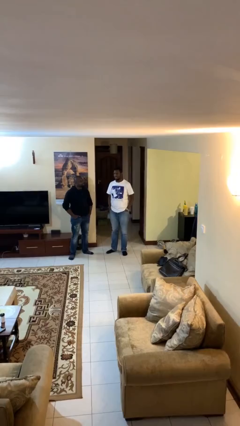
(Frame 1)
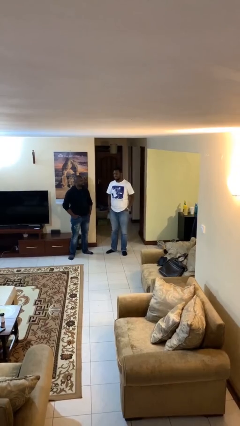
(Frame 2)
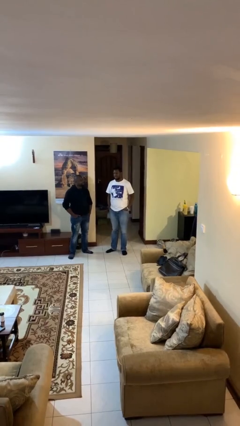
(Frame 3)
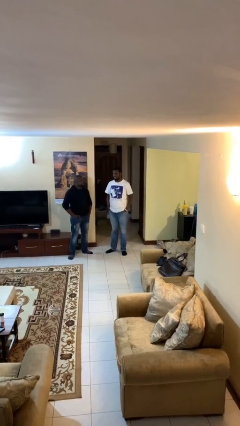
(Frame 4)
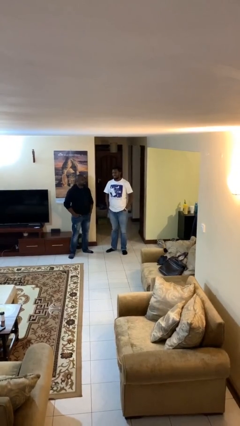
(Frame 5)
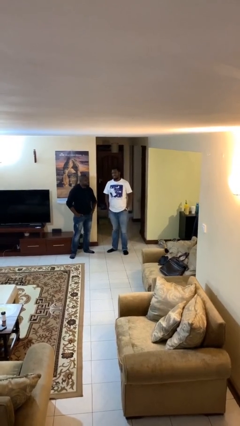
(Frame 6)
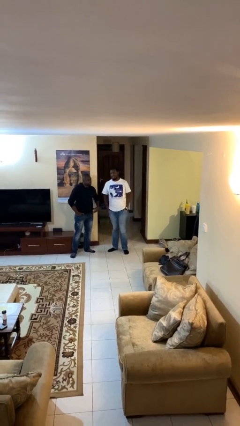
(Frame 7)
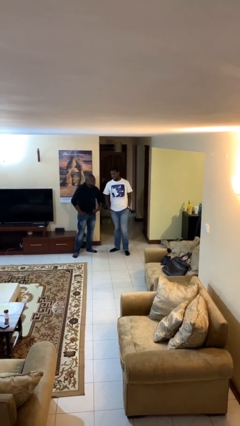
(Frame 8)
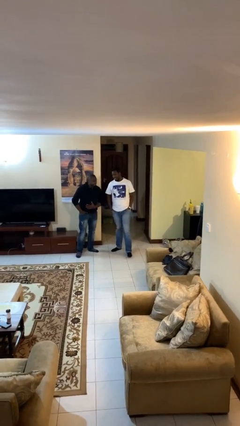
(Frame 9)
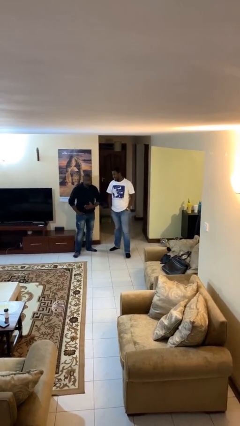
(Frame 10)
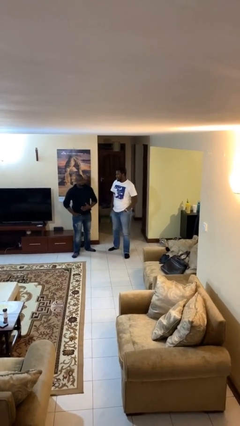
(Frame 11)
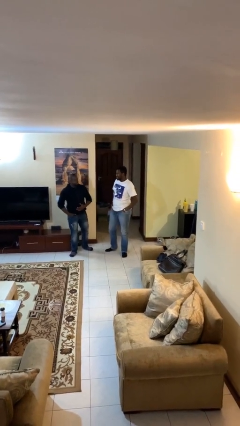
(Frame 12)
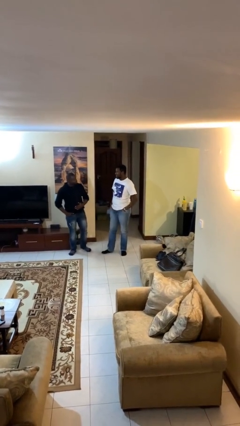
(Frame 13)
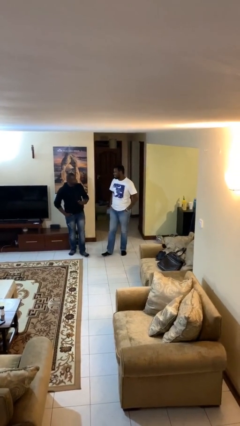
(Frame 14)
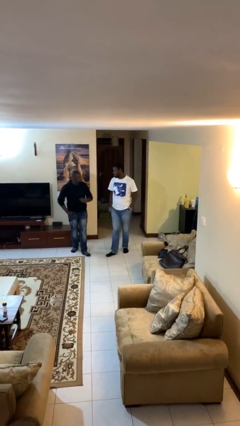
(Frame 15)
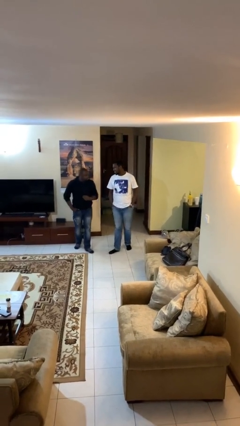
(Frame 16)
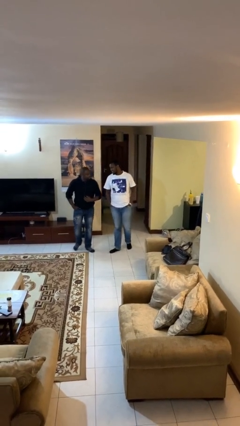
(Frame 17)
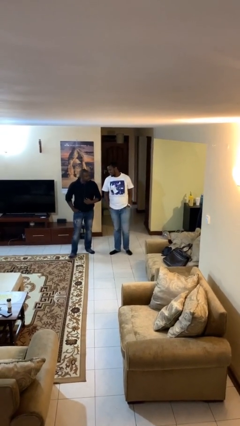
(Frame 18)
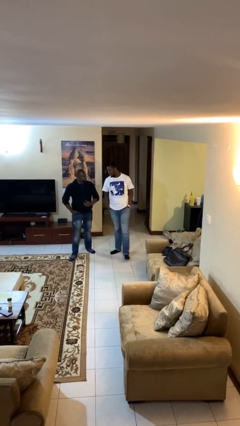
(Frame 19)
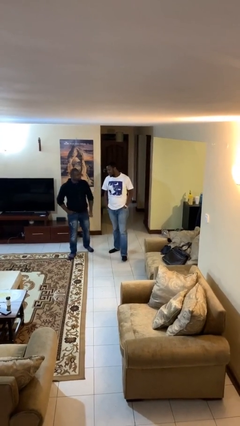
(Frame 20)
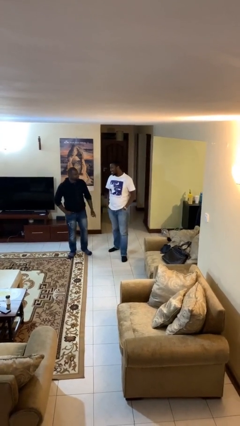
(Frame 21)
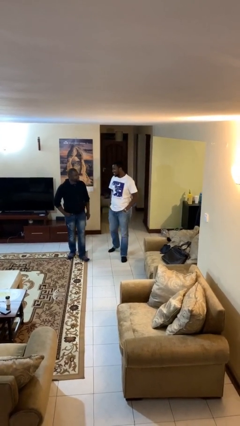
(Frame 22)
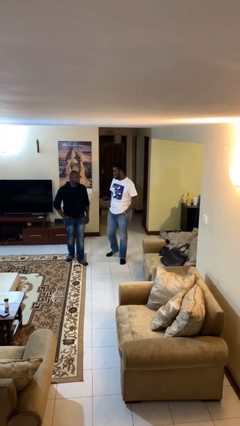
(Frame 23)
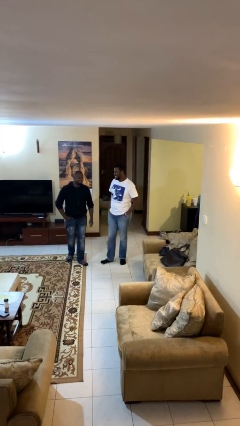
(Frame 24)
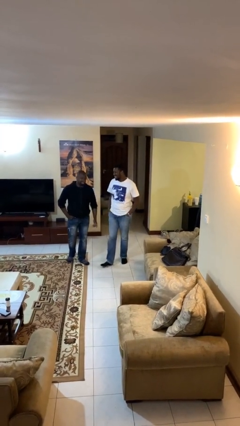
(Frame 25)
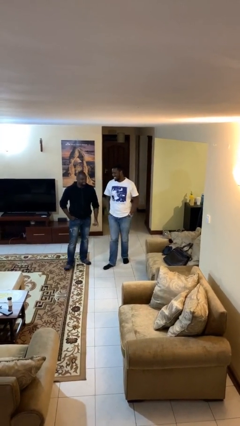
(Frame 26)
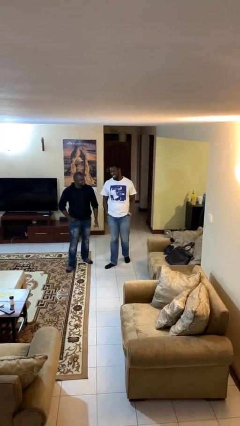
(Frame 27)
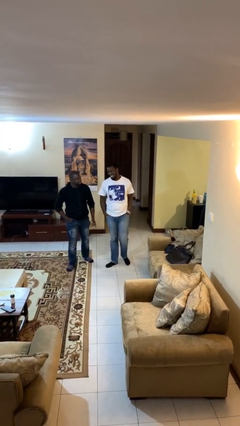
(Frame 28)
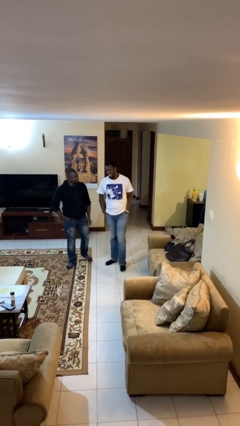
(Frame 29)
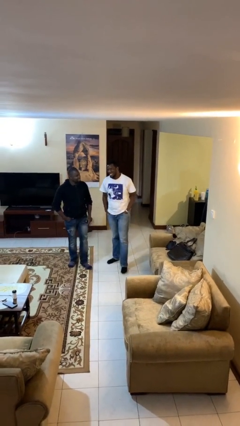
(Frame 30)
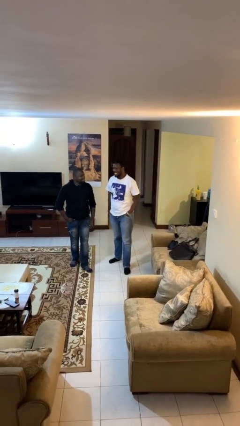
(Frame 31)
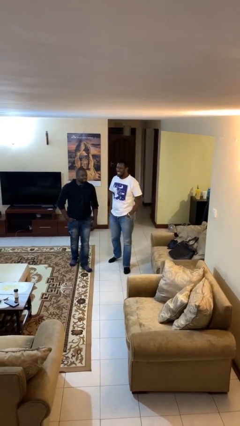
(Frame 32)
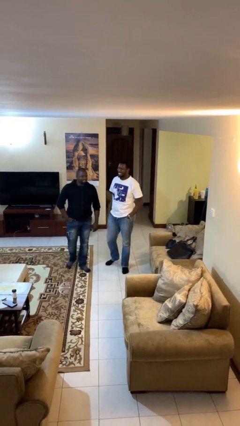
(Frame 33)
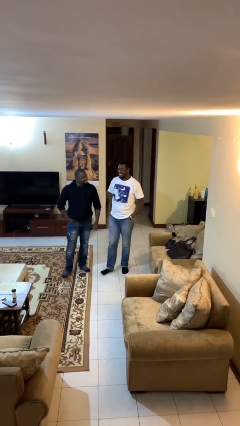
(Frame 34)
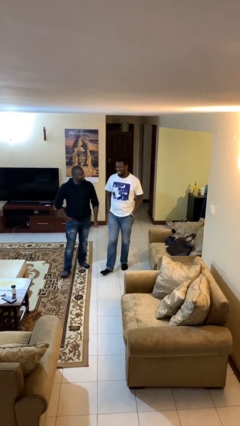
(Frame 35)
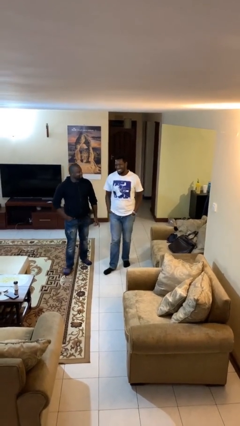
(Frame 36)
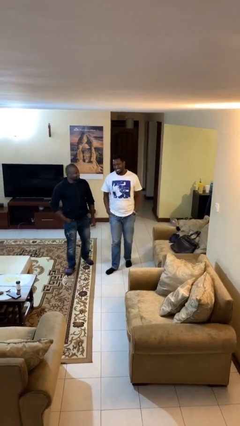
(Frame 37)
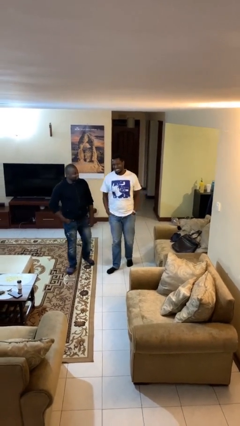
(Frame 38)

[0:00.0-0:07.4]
person talks to person

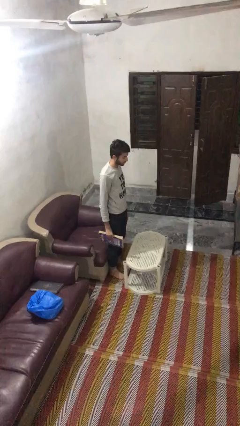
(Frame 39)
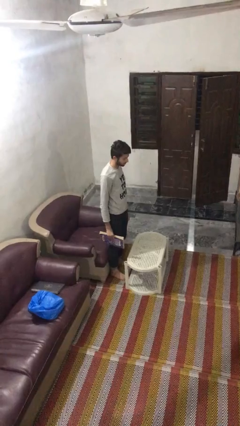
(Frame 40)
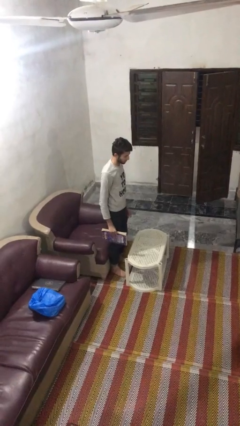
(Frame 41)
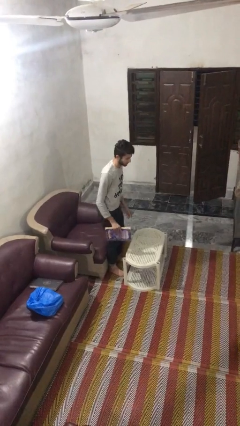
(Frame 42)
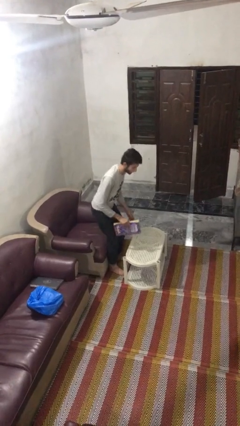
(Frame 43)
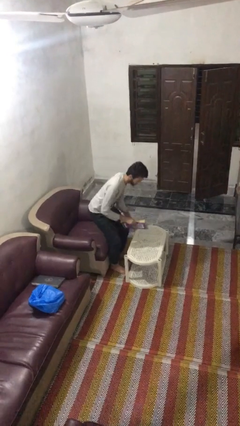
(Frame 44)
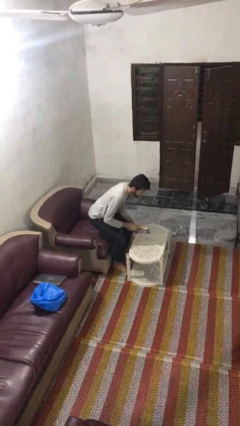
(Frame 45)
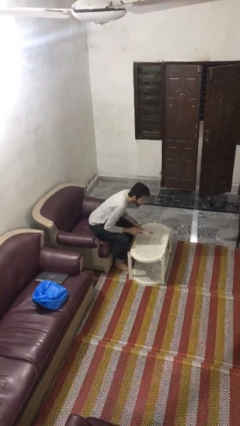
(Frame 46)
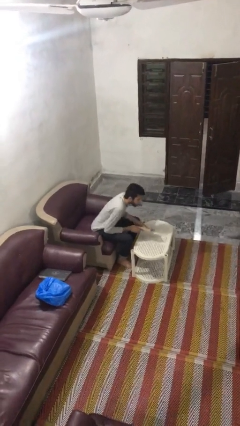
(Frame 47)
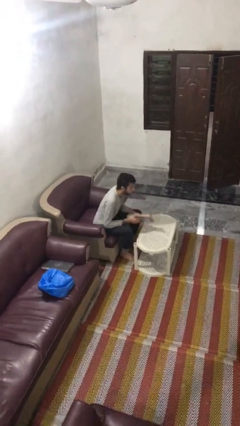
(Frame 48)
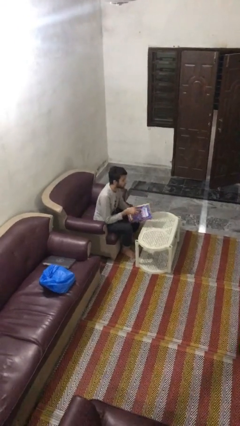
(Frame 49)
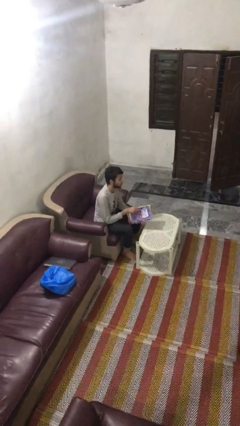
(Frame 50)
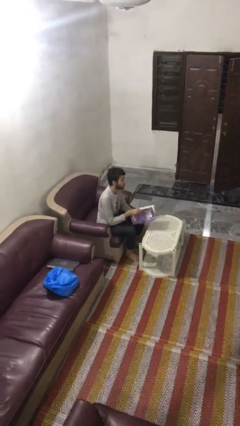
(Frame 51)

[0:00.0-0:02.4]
person sits down

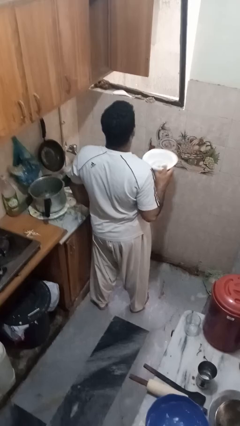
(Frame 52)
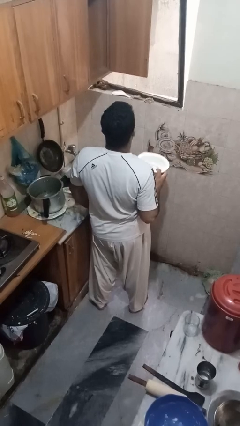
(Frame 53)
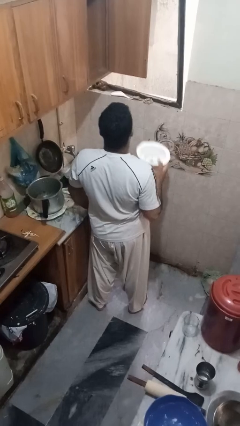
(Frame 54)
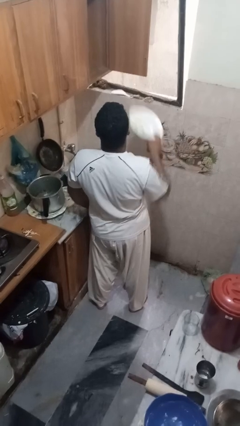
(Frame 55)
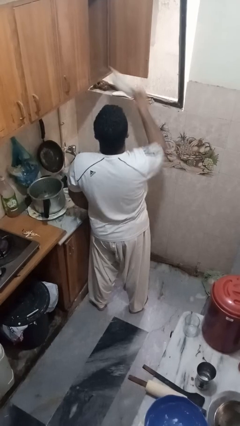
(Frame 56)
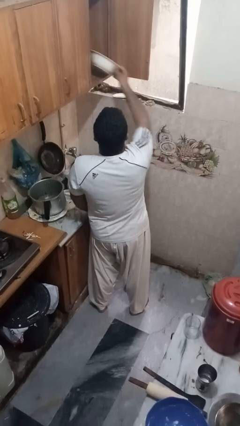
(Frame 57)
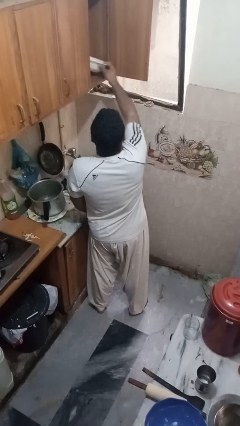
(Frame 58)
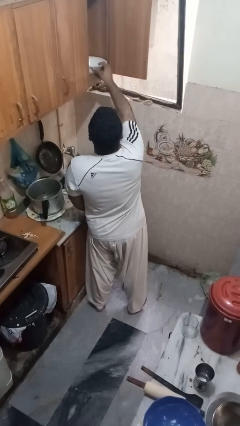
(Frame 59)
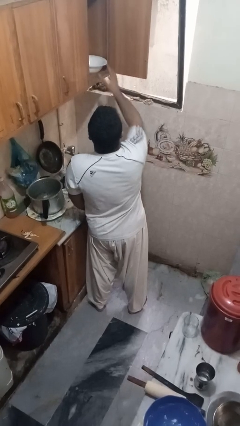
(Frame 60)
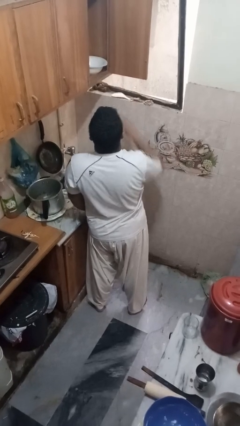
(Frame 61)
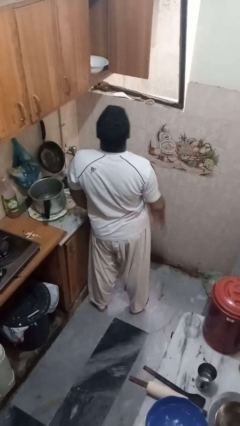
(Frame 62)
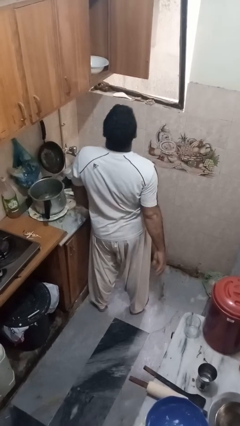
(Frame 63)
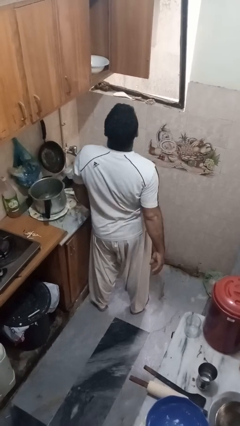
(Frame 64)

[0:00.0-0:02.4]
person puts object in cabinet

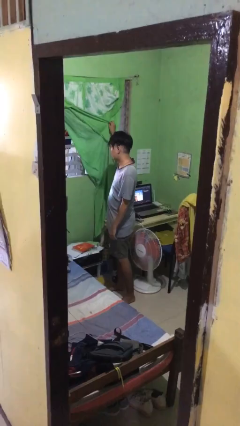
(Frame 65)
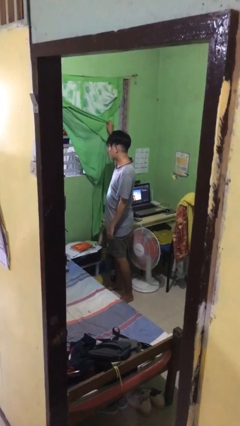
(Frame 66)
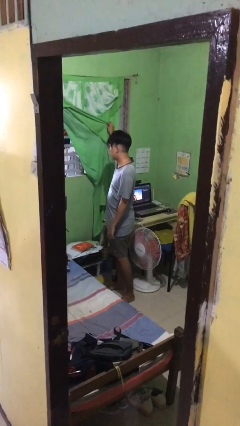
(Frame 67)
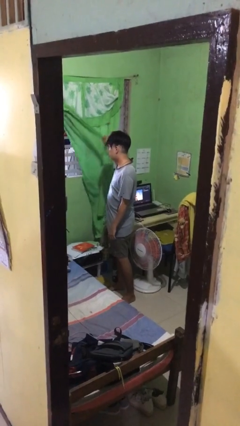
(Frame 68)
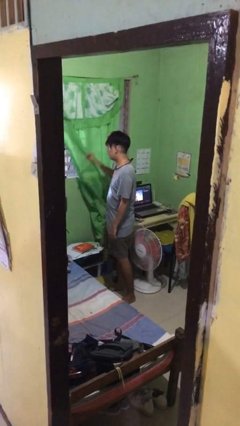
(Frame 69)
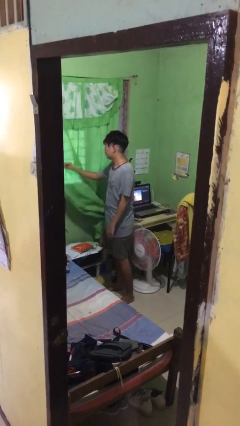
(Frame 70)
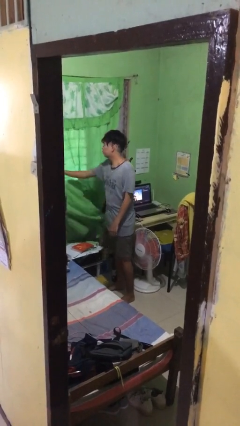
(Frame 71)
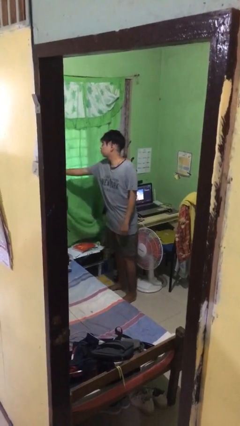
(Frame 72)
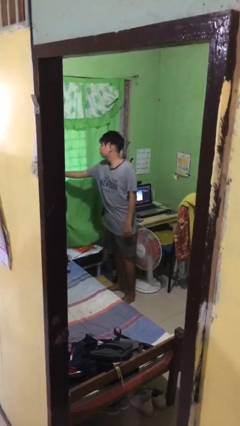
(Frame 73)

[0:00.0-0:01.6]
person closes curtains

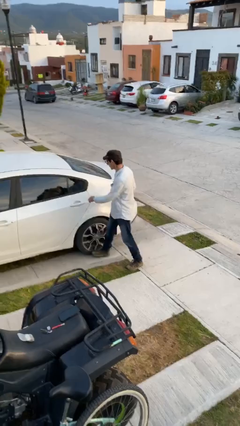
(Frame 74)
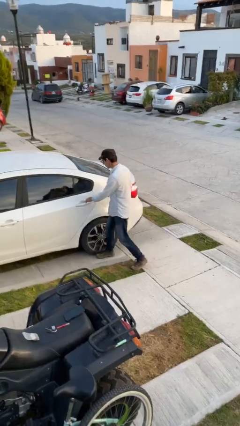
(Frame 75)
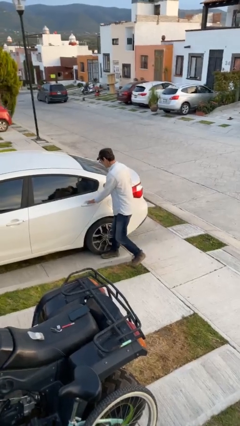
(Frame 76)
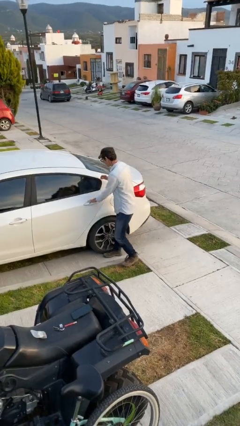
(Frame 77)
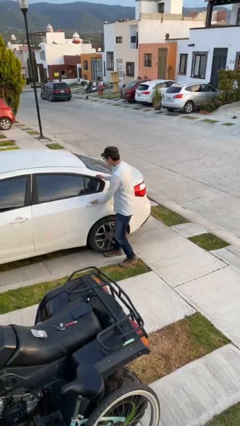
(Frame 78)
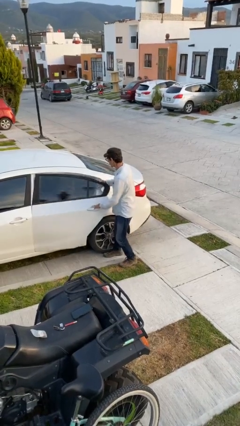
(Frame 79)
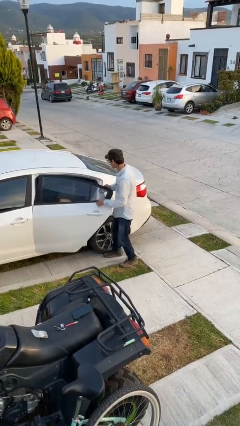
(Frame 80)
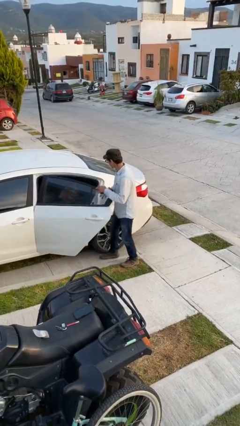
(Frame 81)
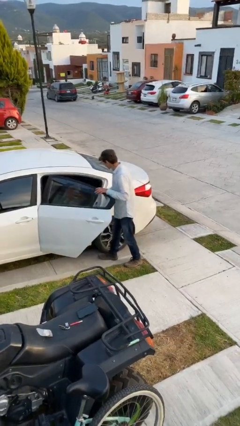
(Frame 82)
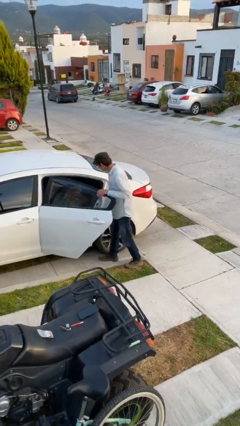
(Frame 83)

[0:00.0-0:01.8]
person opens car door

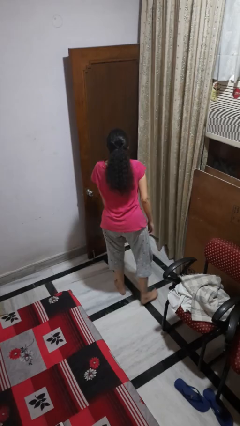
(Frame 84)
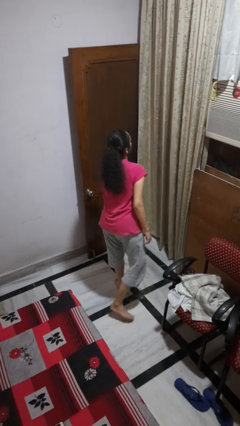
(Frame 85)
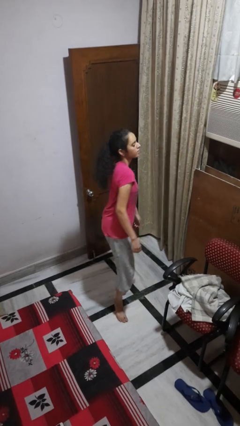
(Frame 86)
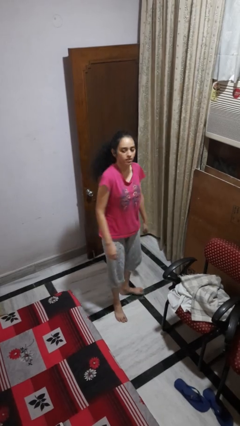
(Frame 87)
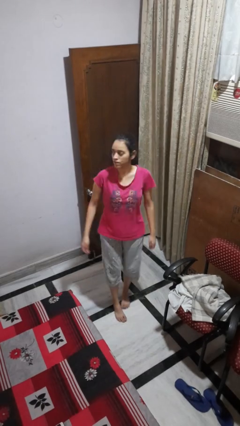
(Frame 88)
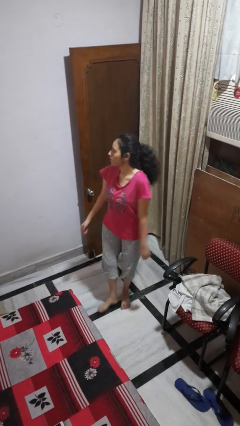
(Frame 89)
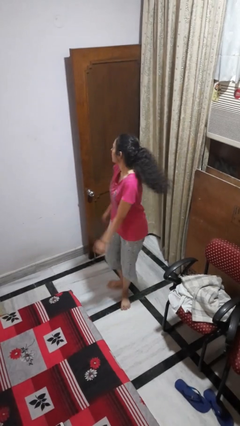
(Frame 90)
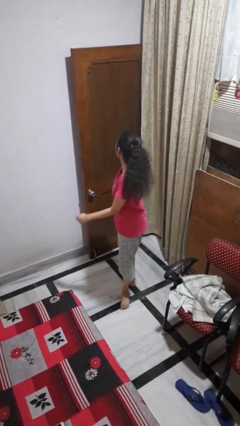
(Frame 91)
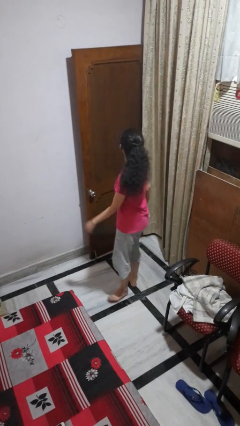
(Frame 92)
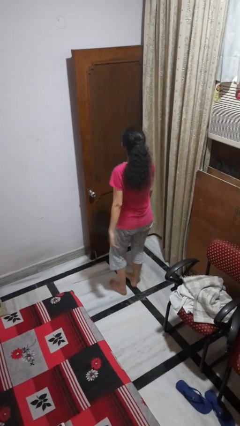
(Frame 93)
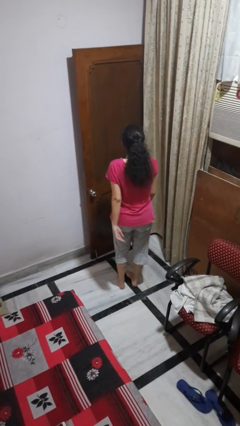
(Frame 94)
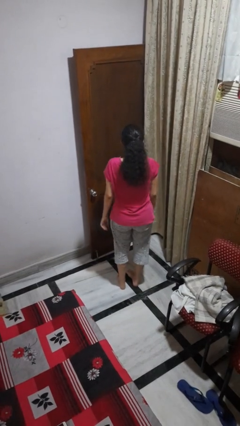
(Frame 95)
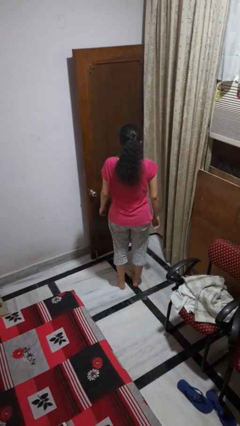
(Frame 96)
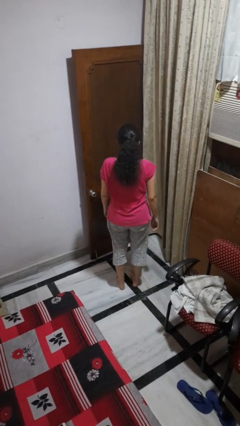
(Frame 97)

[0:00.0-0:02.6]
person twirls
